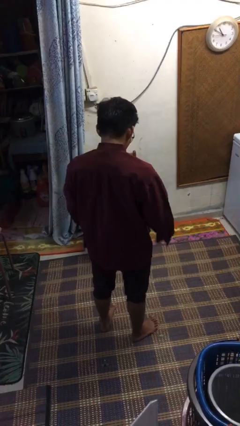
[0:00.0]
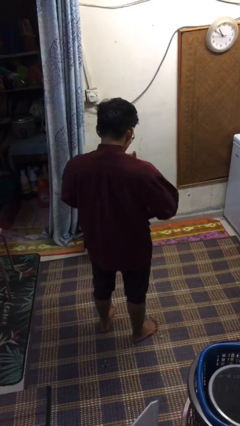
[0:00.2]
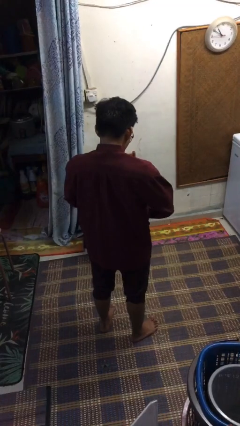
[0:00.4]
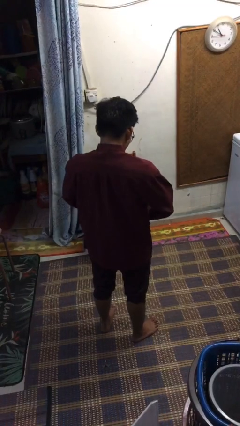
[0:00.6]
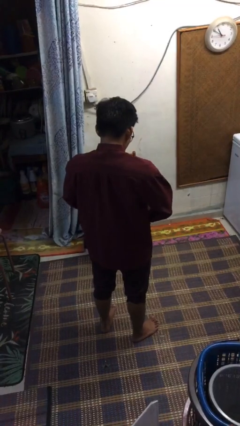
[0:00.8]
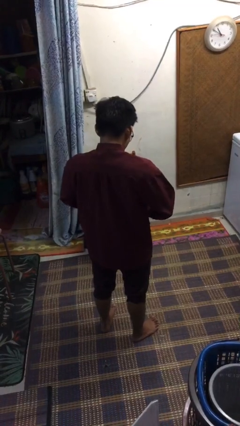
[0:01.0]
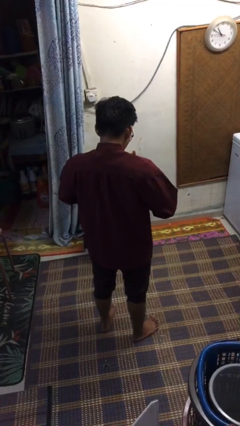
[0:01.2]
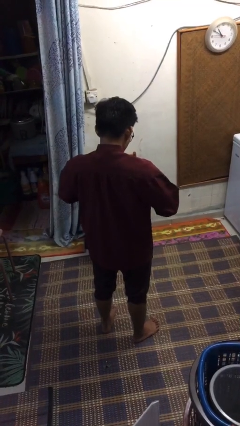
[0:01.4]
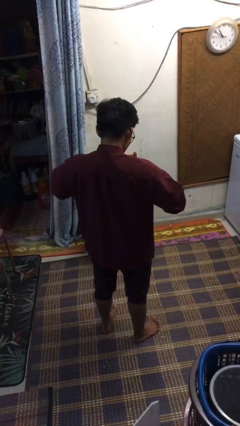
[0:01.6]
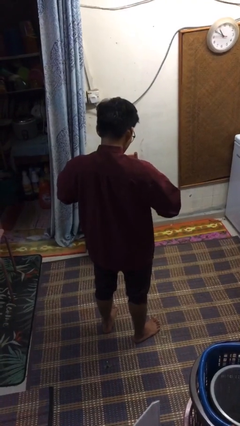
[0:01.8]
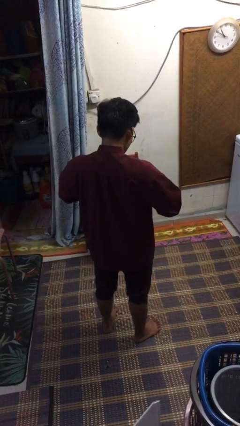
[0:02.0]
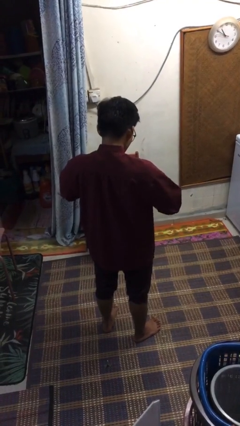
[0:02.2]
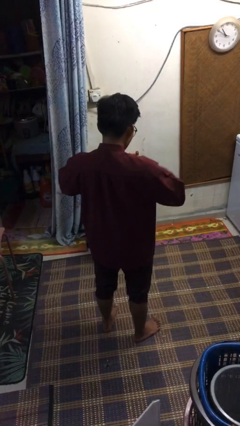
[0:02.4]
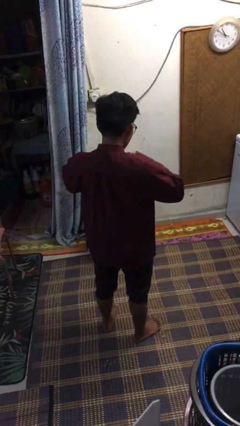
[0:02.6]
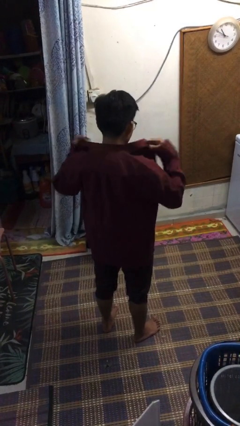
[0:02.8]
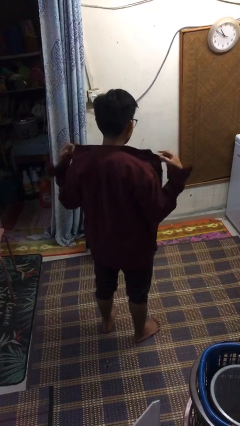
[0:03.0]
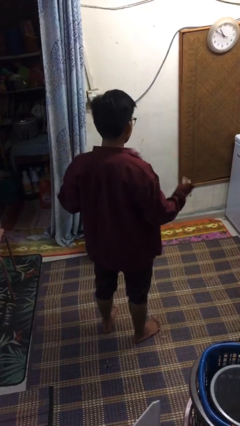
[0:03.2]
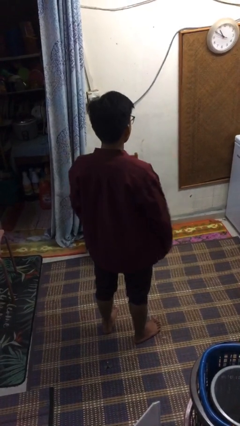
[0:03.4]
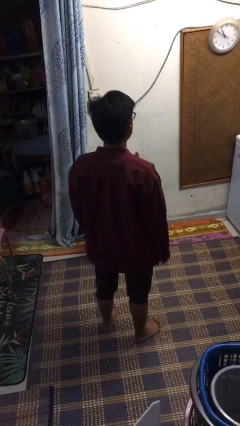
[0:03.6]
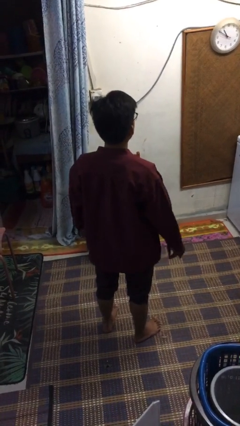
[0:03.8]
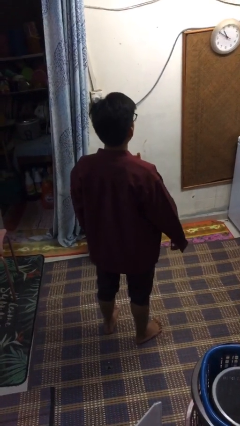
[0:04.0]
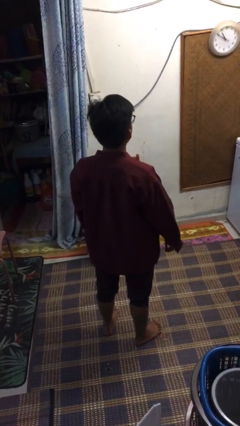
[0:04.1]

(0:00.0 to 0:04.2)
person unbuttons shirt

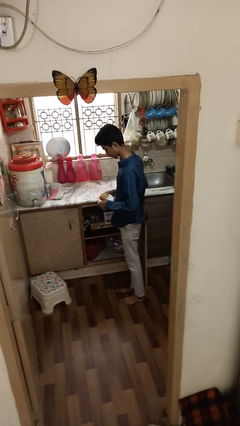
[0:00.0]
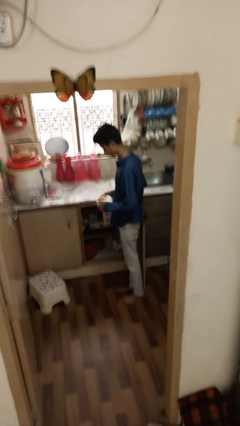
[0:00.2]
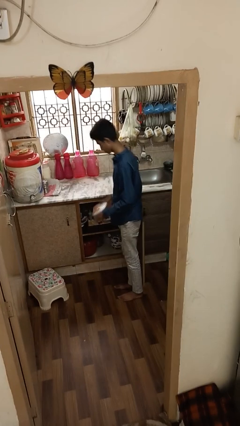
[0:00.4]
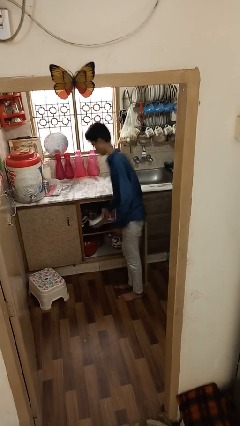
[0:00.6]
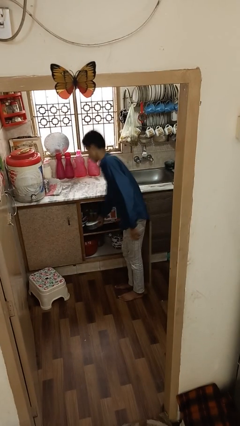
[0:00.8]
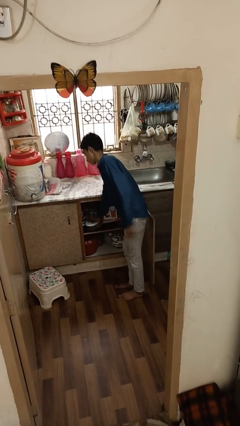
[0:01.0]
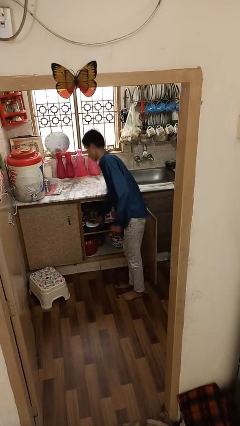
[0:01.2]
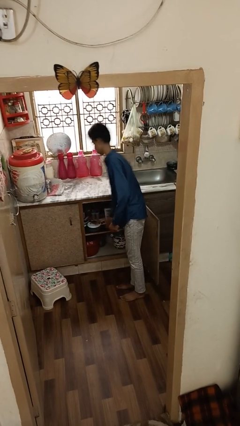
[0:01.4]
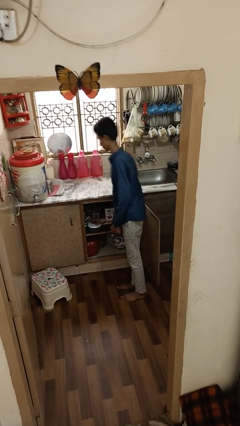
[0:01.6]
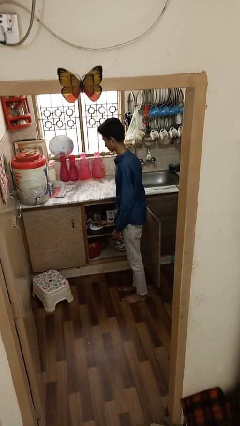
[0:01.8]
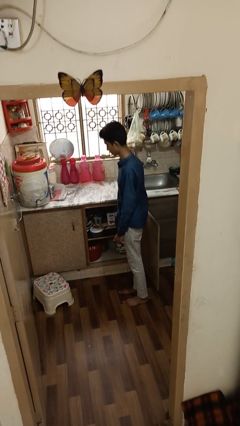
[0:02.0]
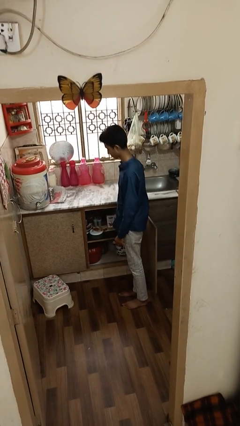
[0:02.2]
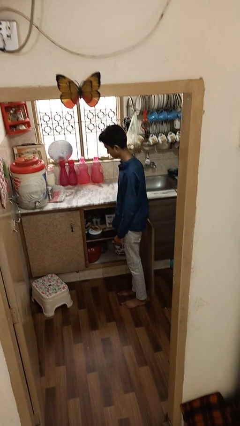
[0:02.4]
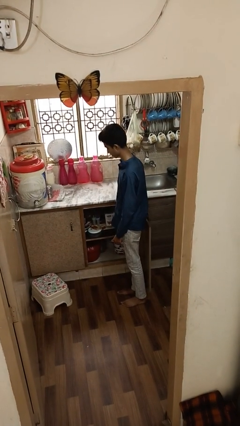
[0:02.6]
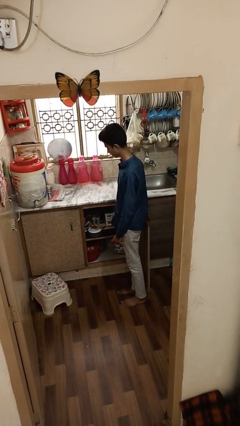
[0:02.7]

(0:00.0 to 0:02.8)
person puts down object into cabinet

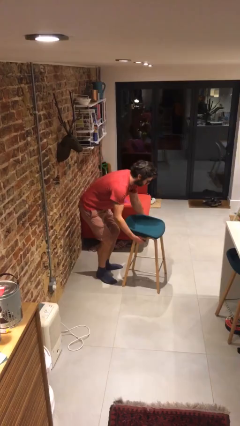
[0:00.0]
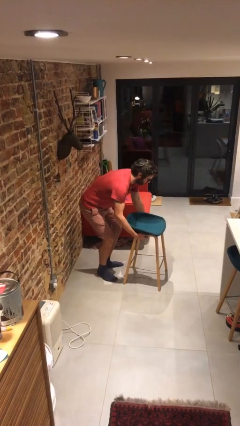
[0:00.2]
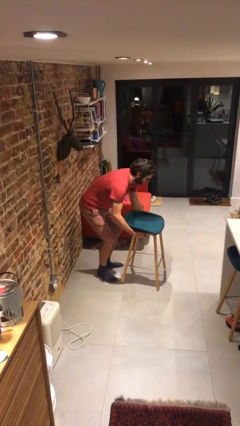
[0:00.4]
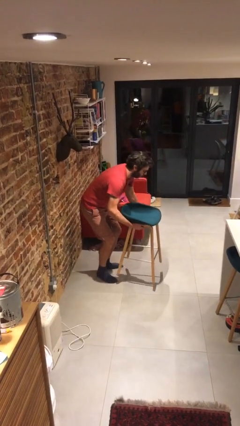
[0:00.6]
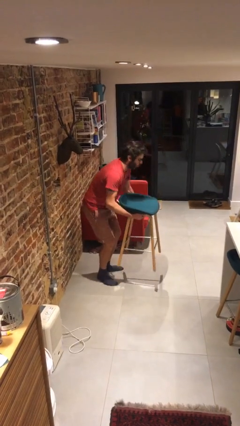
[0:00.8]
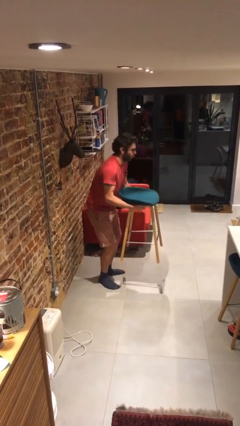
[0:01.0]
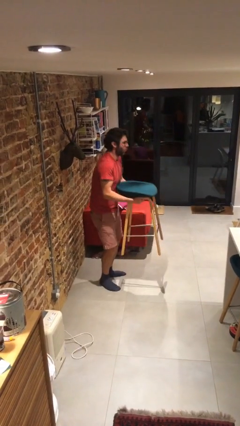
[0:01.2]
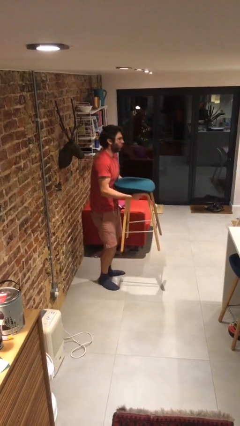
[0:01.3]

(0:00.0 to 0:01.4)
person picks up object from floor

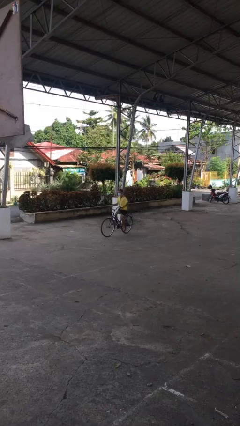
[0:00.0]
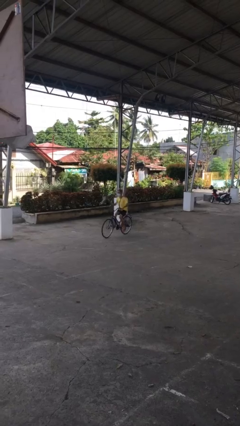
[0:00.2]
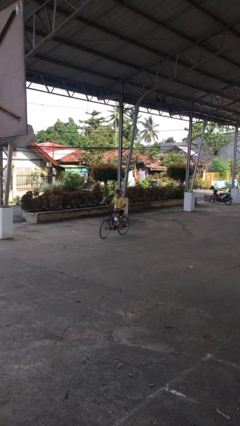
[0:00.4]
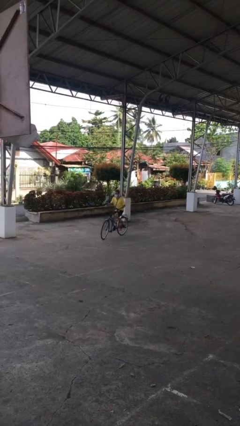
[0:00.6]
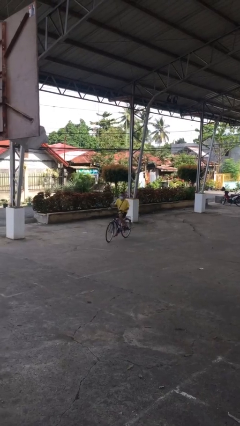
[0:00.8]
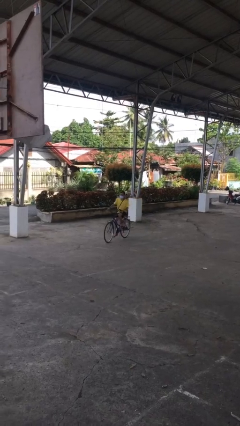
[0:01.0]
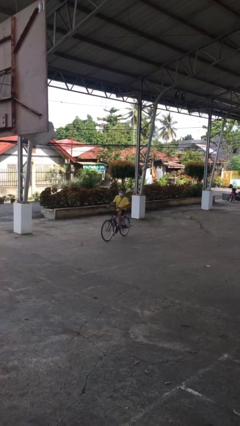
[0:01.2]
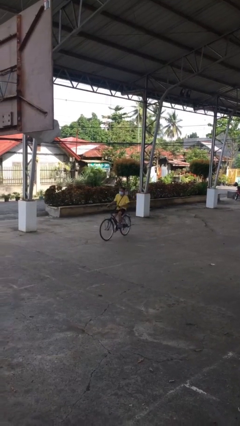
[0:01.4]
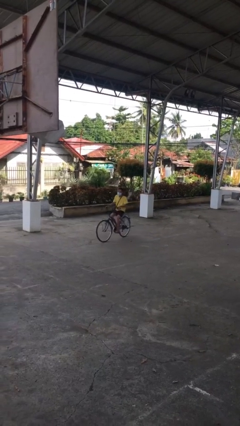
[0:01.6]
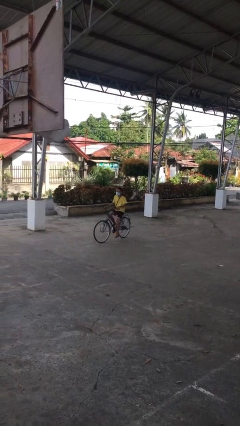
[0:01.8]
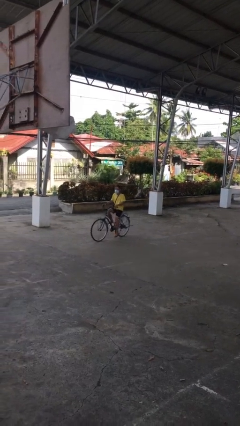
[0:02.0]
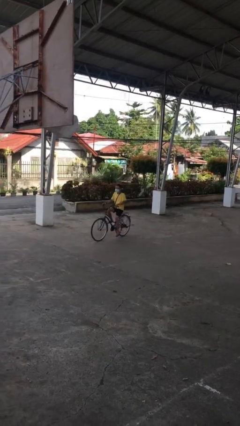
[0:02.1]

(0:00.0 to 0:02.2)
person rides bicycle

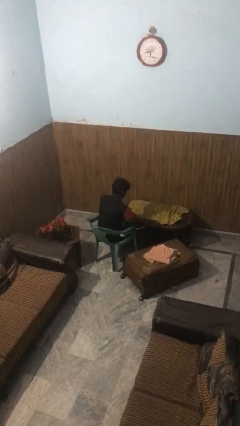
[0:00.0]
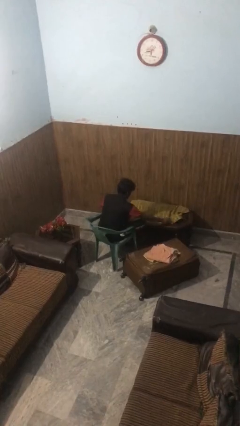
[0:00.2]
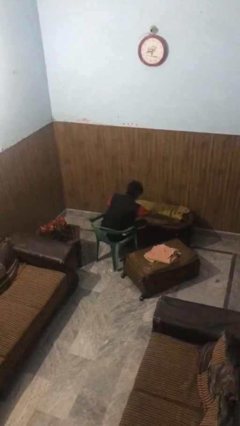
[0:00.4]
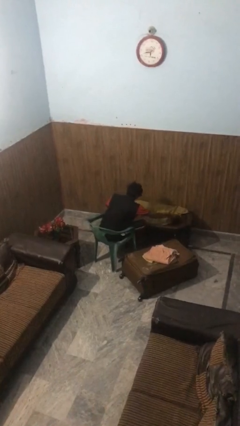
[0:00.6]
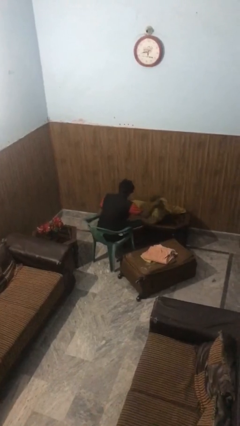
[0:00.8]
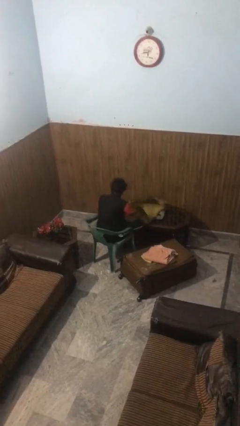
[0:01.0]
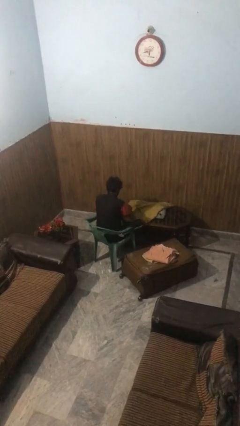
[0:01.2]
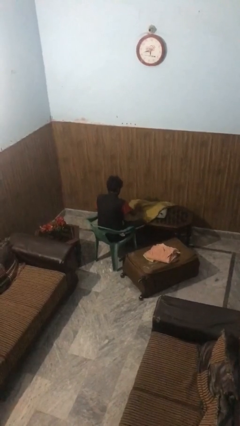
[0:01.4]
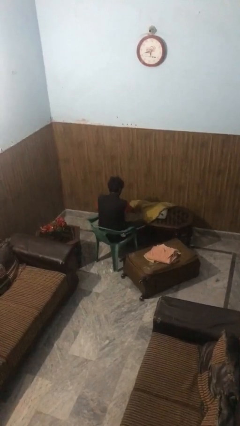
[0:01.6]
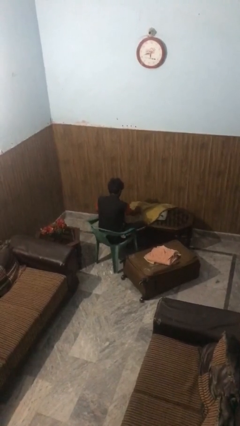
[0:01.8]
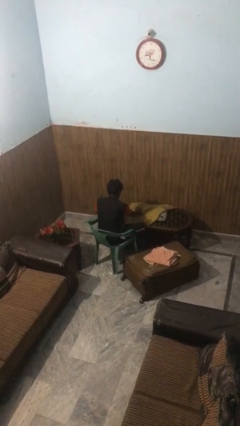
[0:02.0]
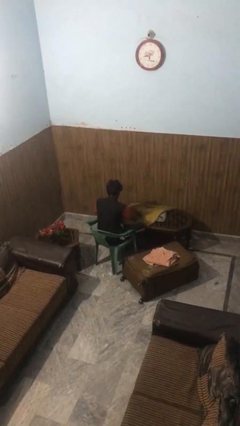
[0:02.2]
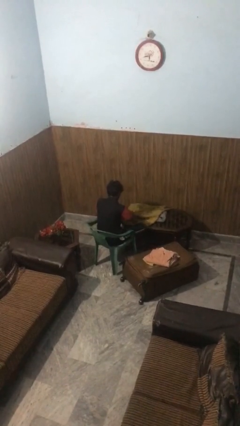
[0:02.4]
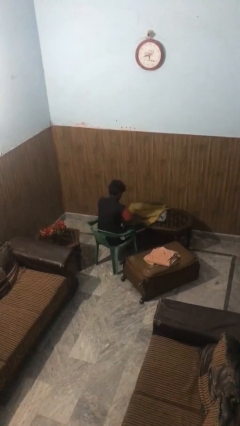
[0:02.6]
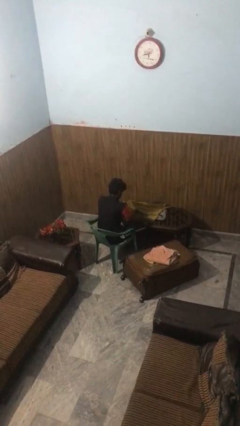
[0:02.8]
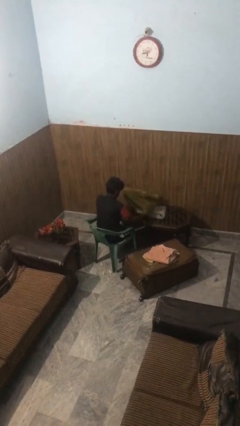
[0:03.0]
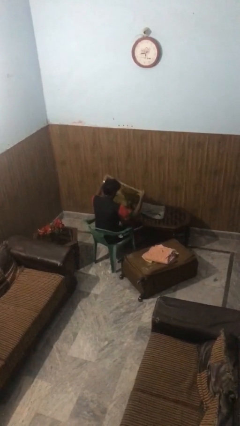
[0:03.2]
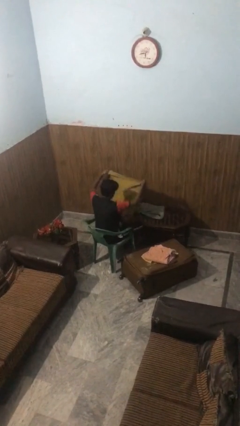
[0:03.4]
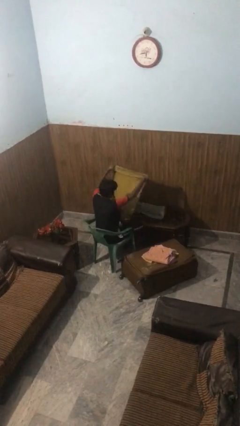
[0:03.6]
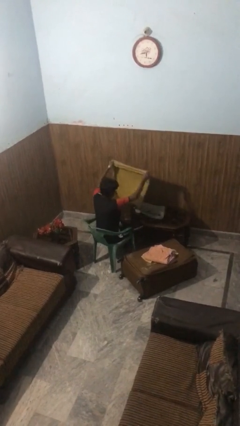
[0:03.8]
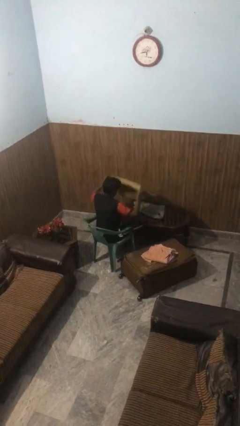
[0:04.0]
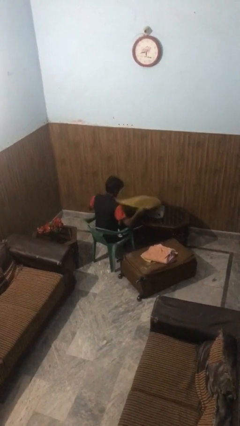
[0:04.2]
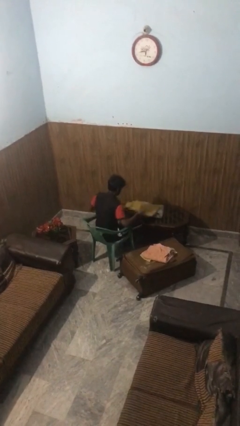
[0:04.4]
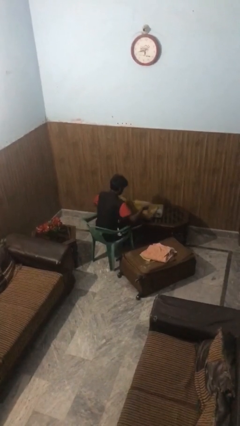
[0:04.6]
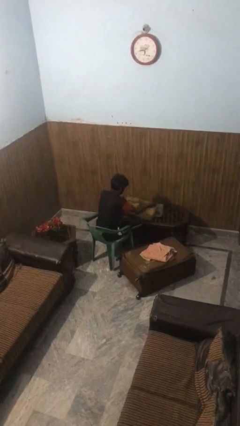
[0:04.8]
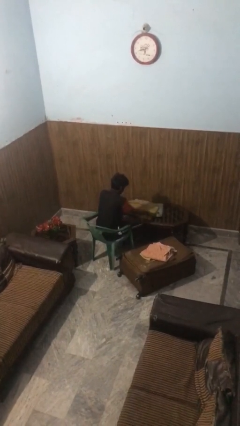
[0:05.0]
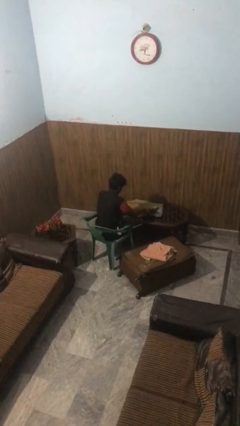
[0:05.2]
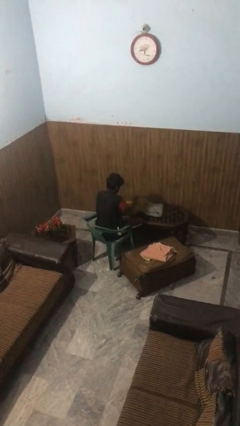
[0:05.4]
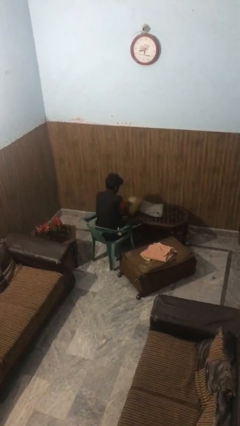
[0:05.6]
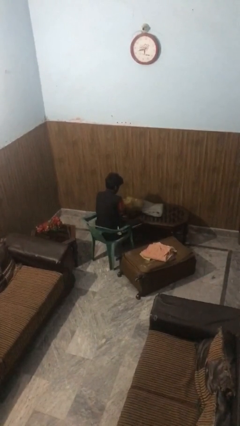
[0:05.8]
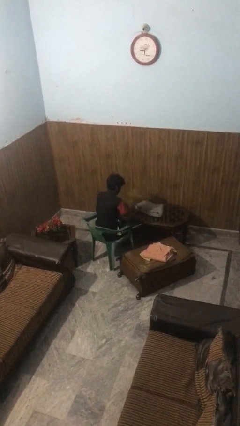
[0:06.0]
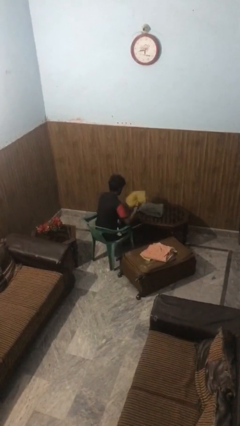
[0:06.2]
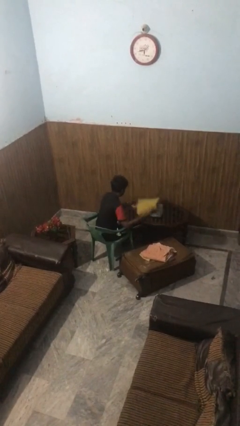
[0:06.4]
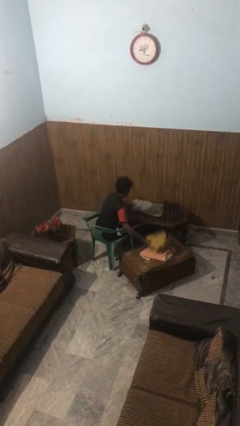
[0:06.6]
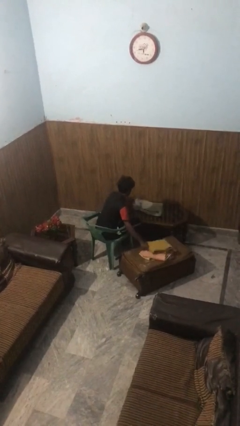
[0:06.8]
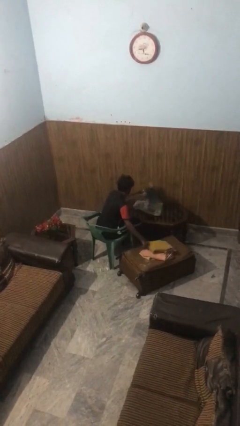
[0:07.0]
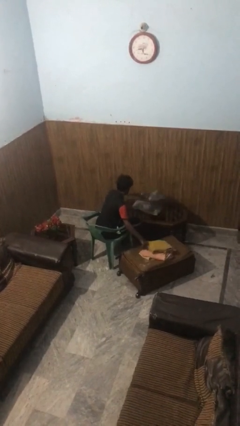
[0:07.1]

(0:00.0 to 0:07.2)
person folds towel
